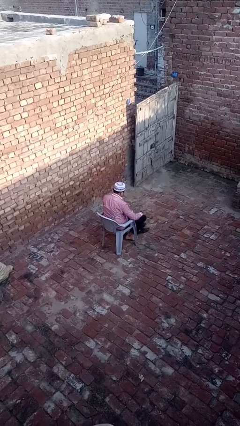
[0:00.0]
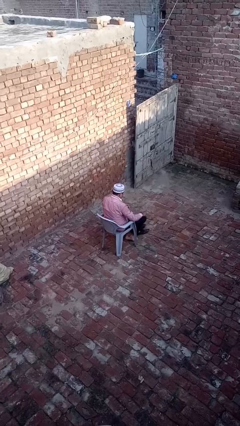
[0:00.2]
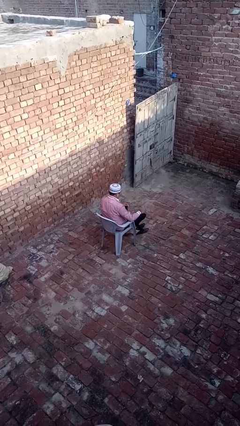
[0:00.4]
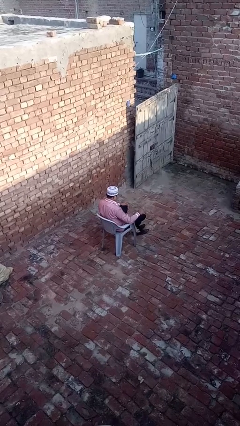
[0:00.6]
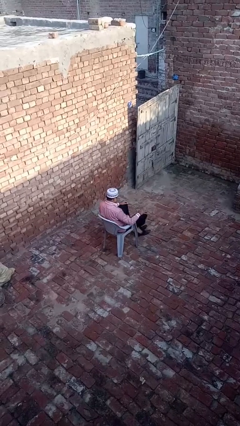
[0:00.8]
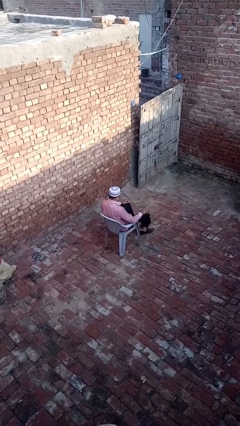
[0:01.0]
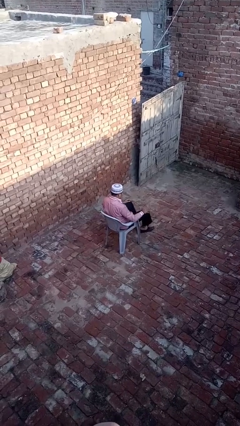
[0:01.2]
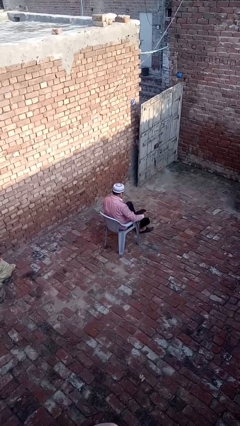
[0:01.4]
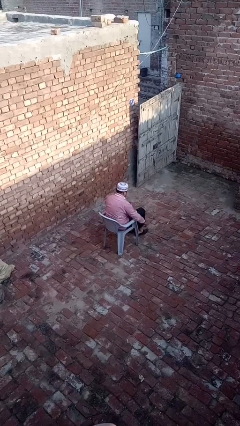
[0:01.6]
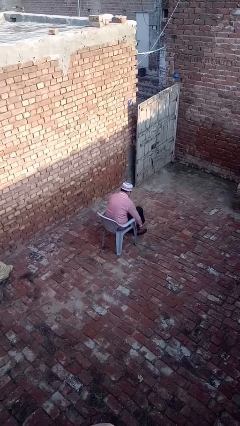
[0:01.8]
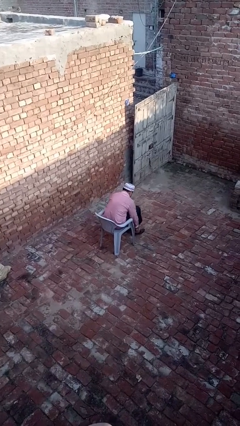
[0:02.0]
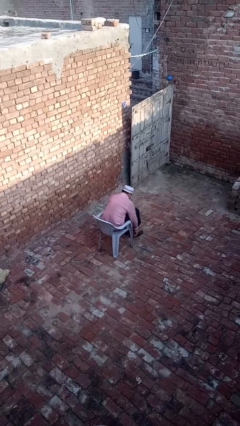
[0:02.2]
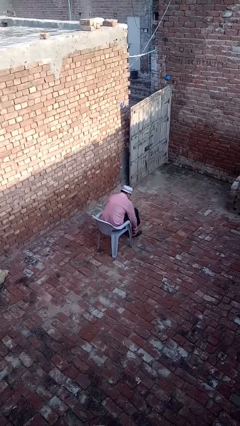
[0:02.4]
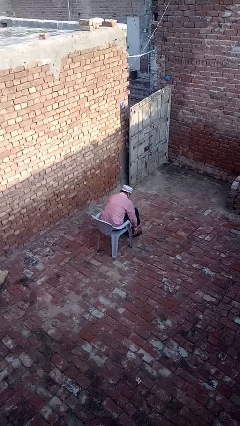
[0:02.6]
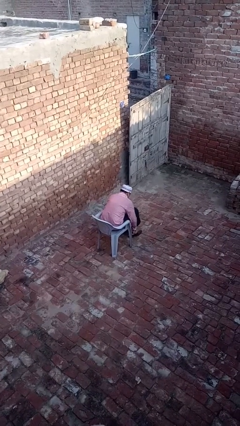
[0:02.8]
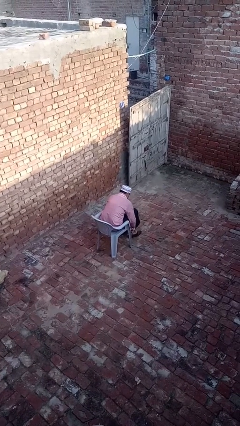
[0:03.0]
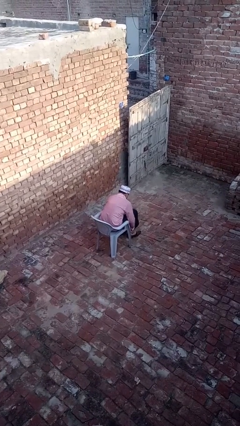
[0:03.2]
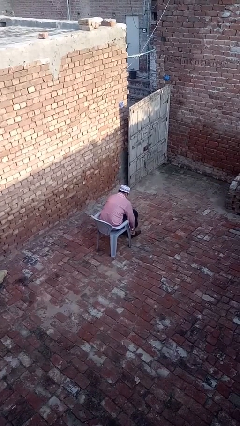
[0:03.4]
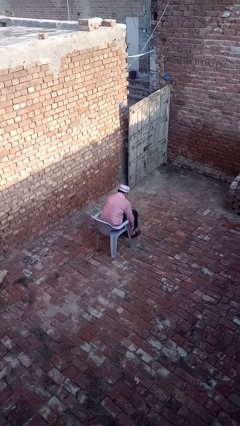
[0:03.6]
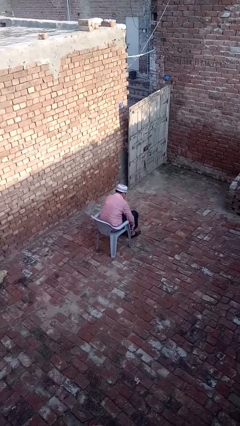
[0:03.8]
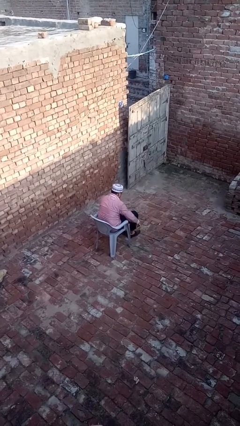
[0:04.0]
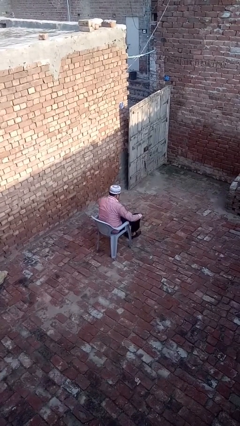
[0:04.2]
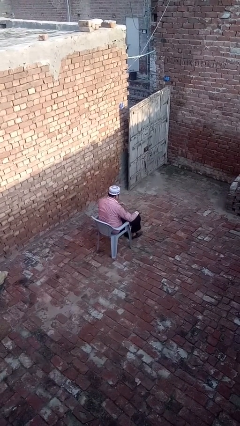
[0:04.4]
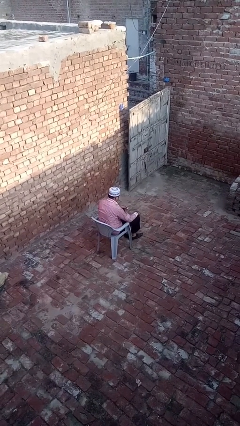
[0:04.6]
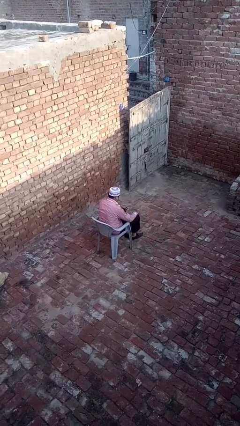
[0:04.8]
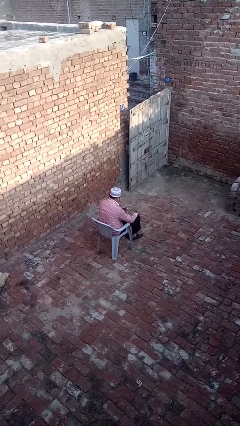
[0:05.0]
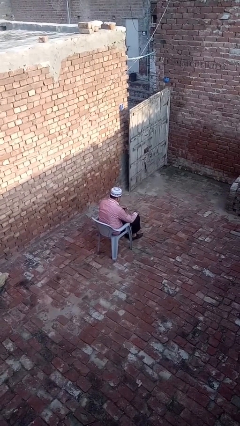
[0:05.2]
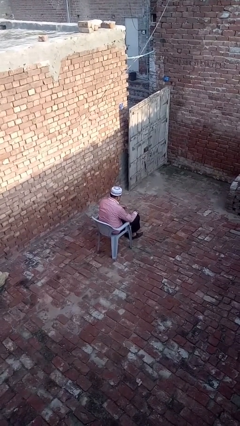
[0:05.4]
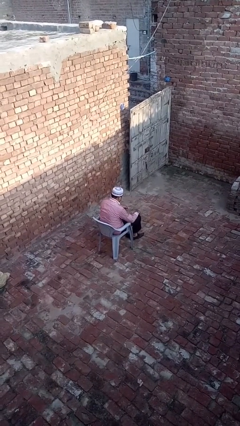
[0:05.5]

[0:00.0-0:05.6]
person puts on shoes

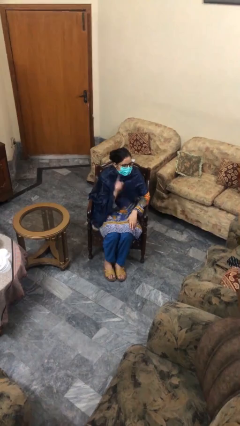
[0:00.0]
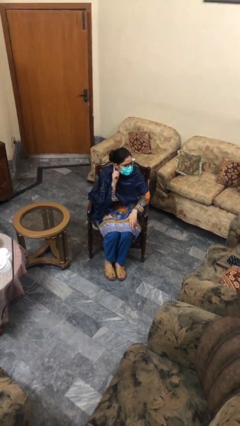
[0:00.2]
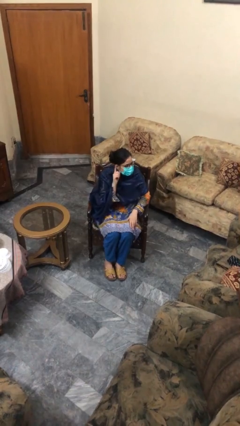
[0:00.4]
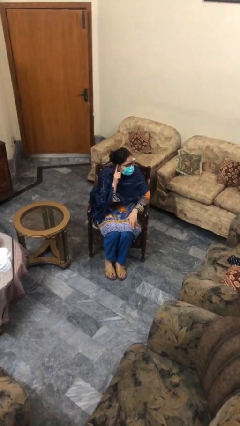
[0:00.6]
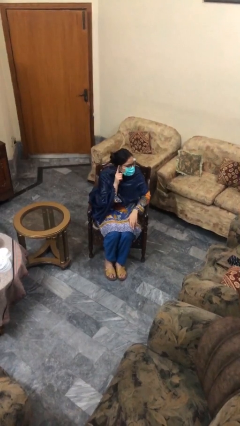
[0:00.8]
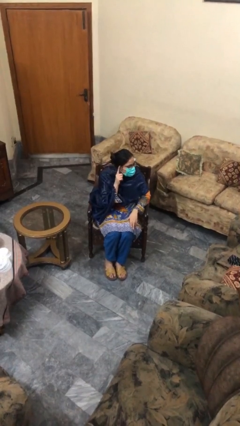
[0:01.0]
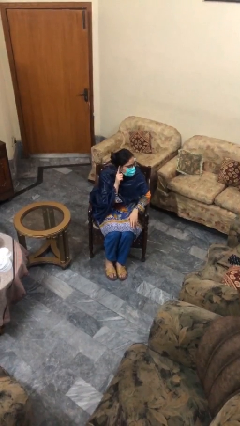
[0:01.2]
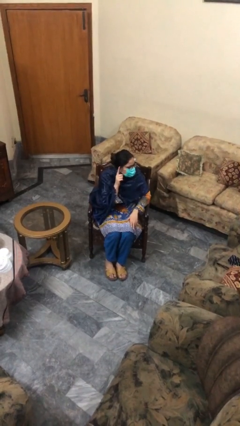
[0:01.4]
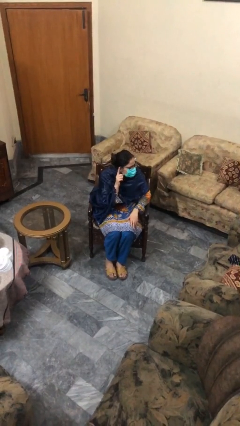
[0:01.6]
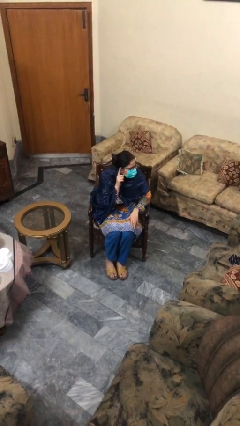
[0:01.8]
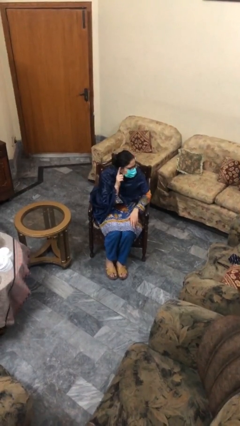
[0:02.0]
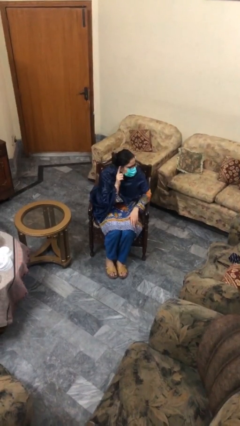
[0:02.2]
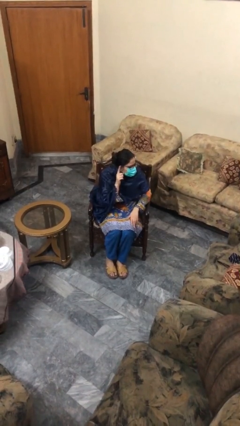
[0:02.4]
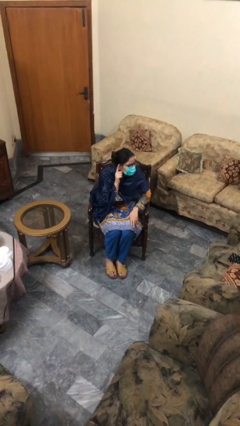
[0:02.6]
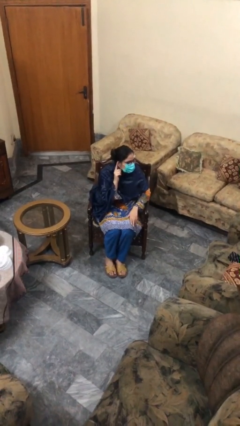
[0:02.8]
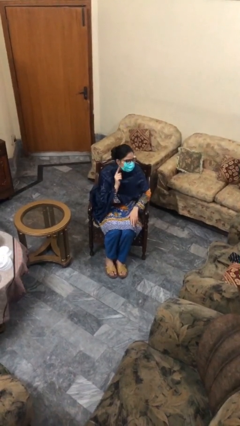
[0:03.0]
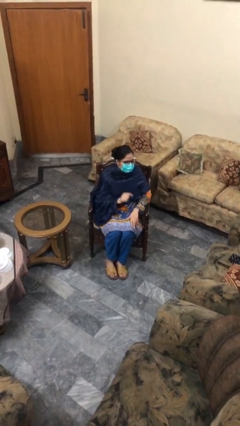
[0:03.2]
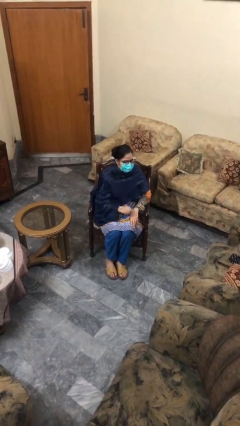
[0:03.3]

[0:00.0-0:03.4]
person gestures listen closely

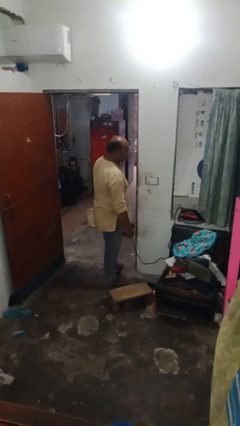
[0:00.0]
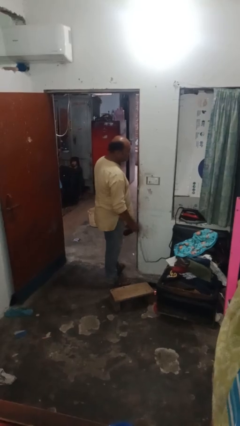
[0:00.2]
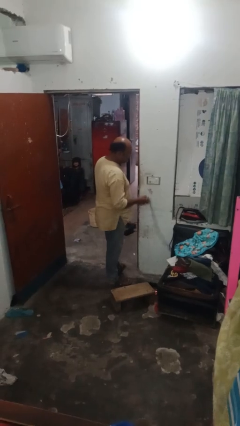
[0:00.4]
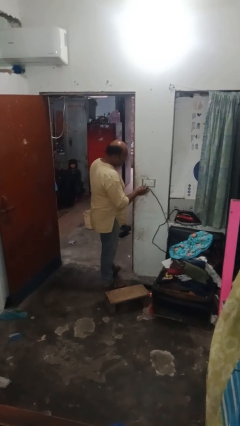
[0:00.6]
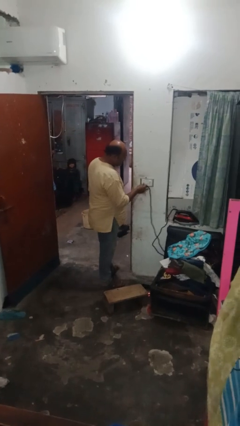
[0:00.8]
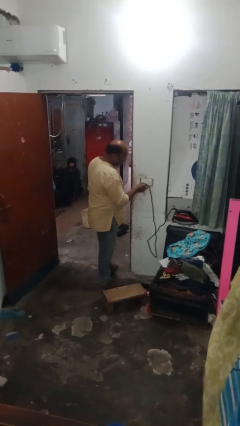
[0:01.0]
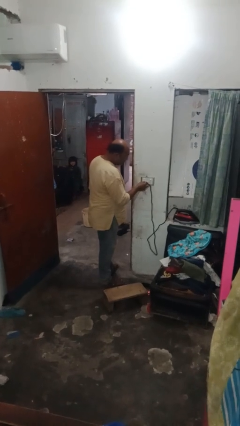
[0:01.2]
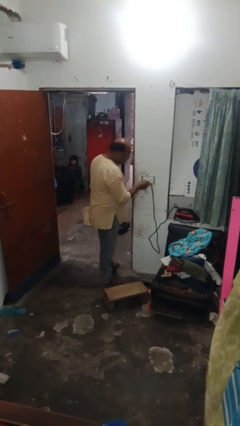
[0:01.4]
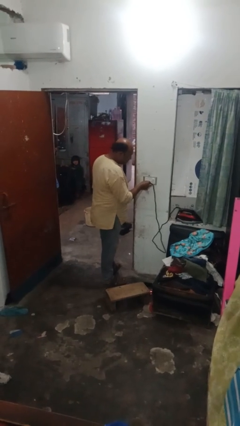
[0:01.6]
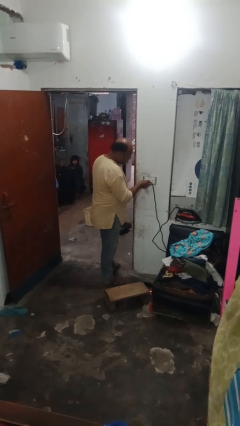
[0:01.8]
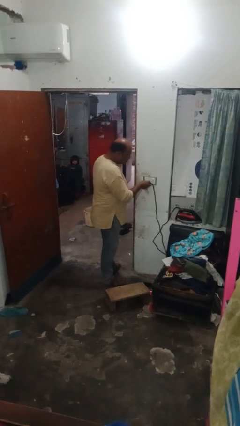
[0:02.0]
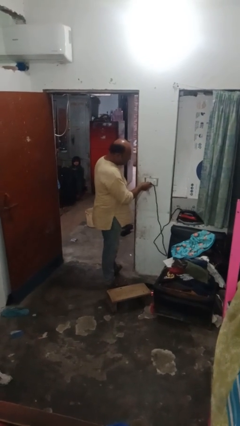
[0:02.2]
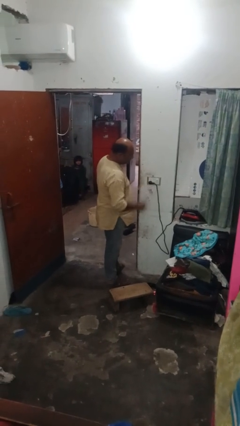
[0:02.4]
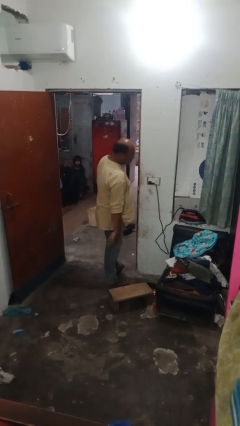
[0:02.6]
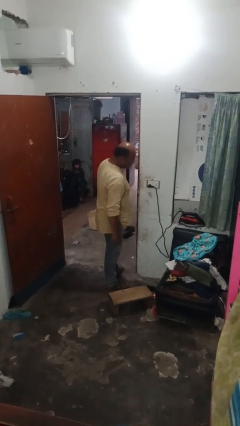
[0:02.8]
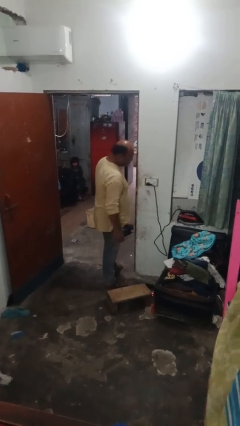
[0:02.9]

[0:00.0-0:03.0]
person plugs into electrical socket

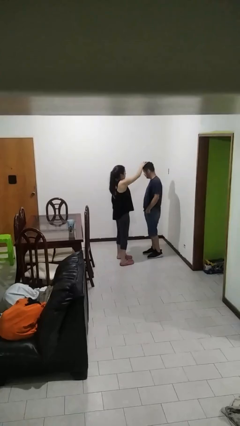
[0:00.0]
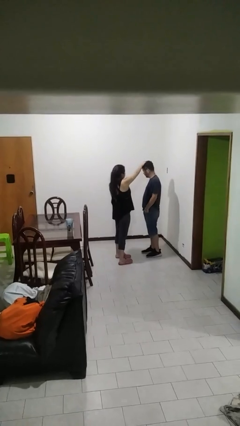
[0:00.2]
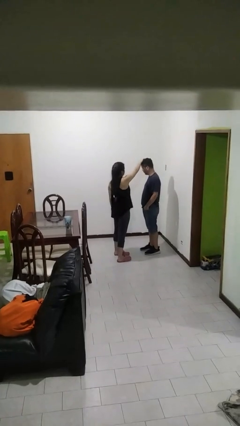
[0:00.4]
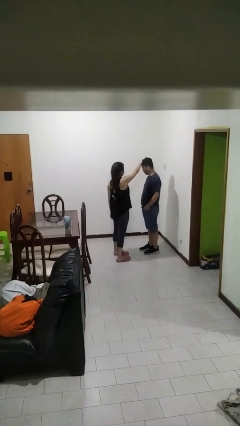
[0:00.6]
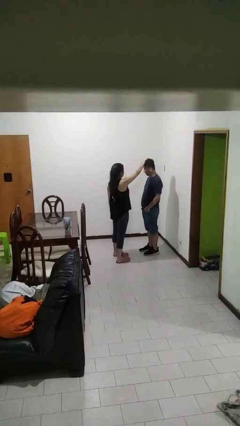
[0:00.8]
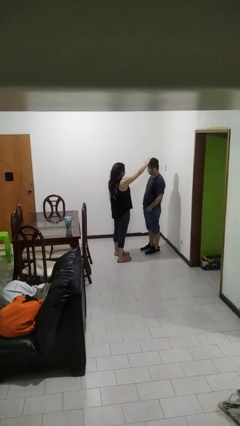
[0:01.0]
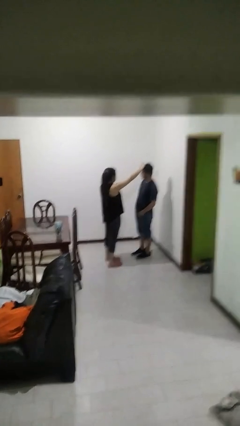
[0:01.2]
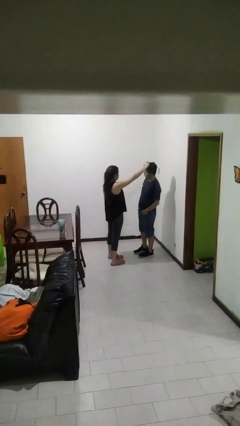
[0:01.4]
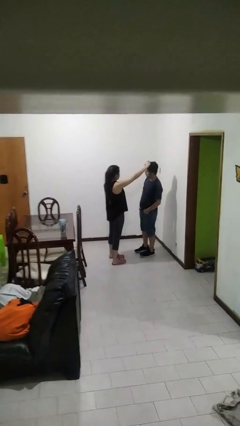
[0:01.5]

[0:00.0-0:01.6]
person grabs person by hair

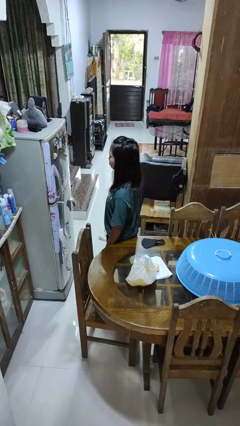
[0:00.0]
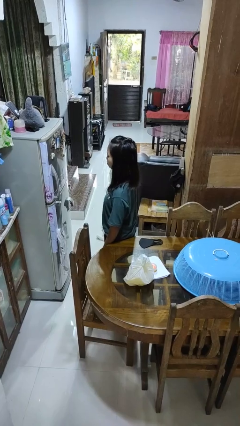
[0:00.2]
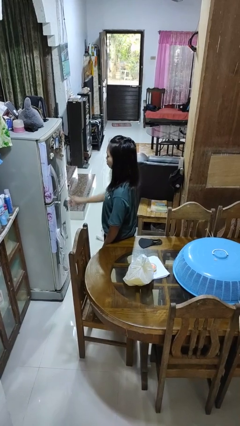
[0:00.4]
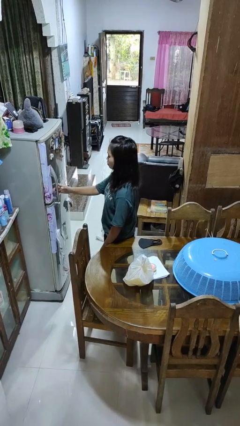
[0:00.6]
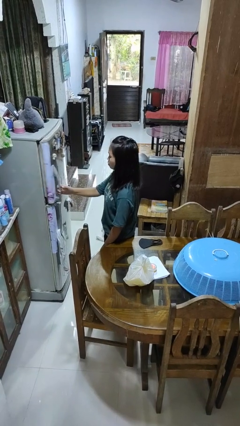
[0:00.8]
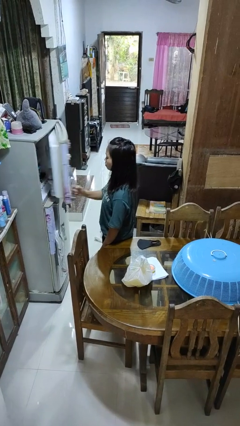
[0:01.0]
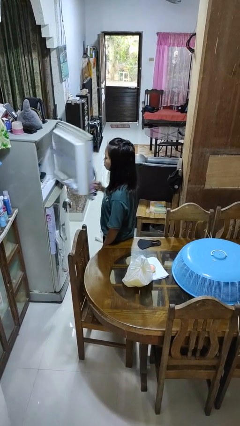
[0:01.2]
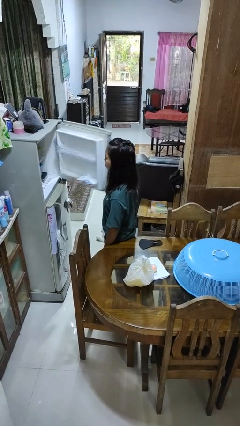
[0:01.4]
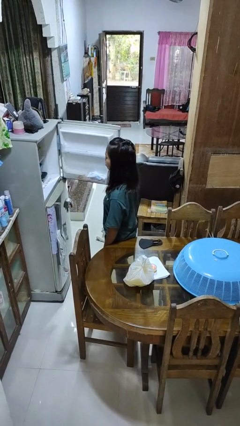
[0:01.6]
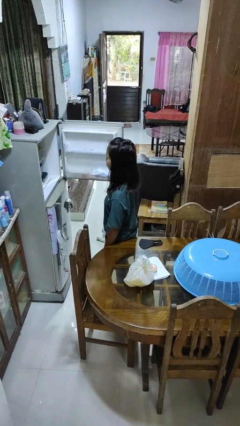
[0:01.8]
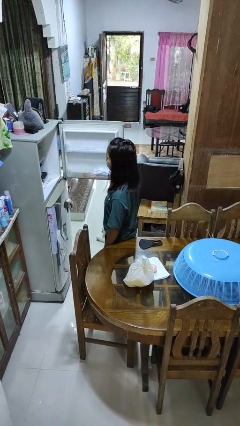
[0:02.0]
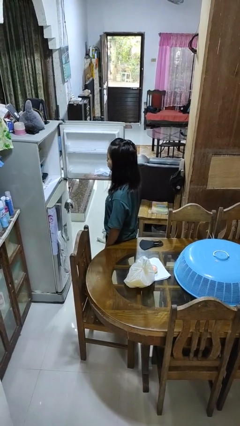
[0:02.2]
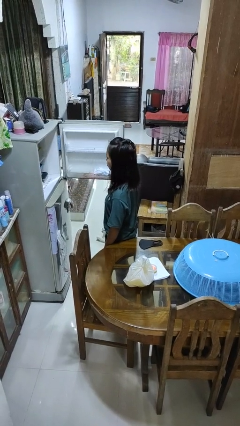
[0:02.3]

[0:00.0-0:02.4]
person opens refrigerator

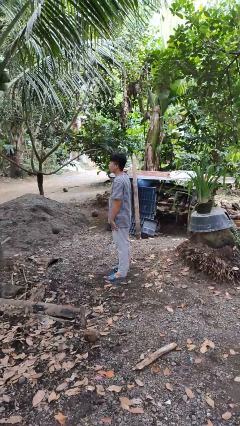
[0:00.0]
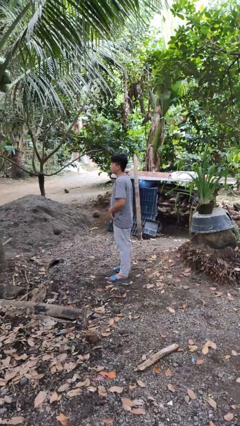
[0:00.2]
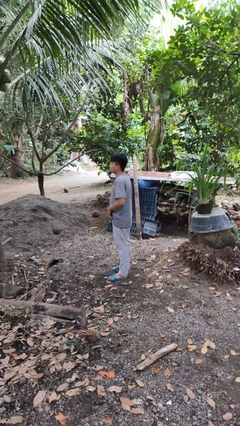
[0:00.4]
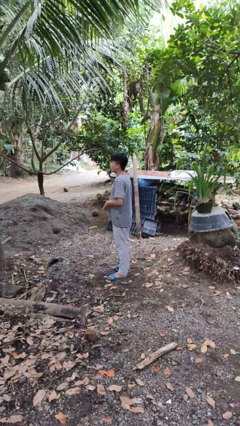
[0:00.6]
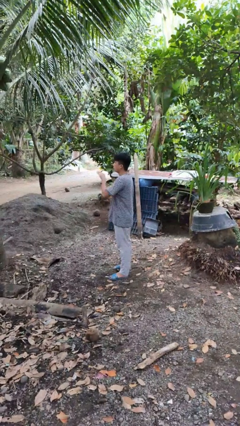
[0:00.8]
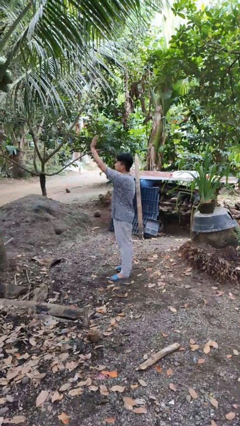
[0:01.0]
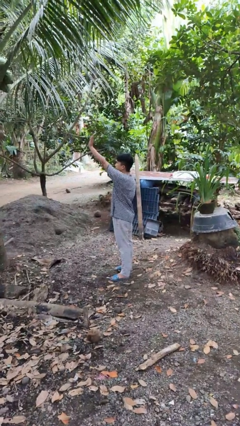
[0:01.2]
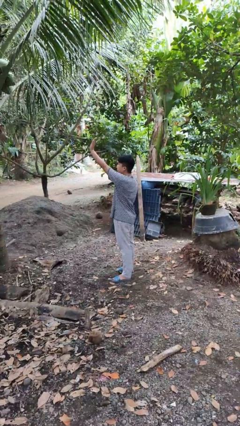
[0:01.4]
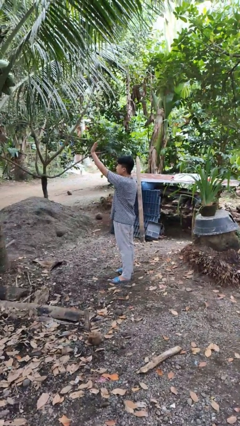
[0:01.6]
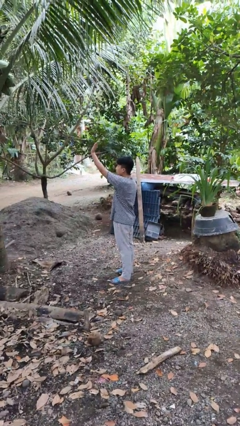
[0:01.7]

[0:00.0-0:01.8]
person gestures swipe up
